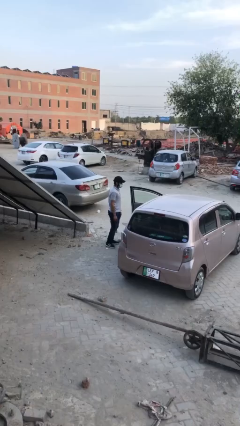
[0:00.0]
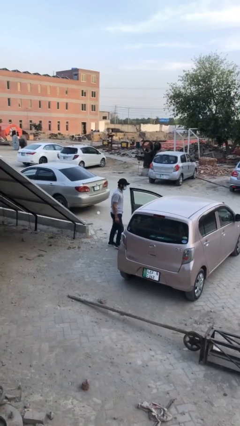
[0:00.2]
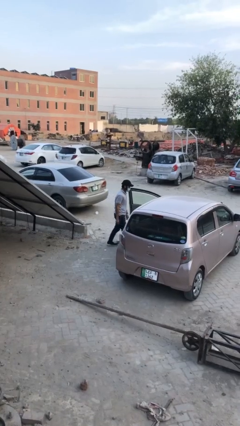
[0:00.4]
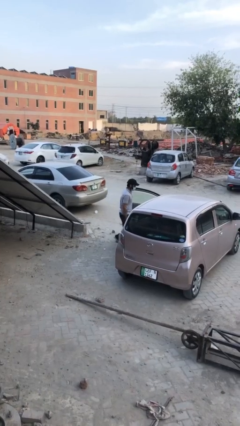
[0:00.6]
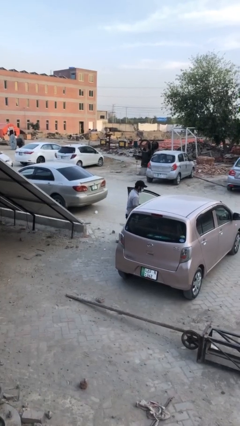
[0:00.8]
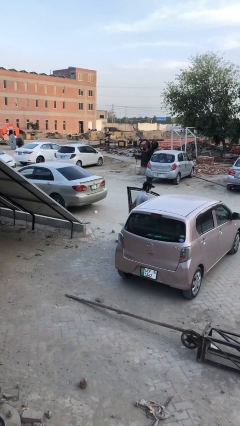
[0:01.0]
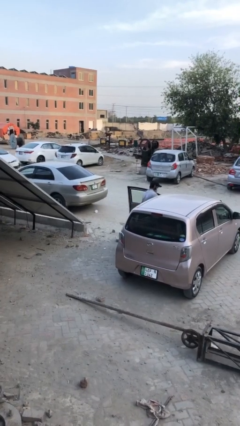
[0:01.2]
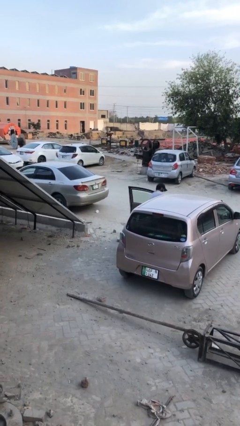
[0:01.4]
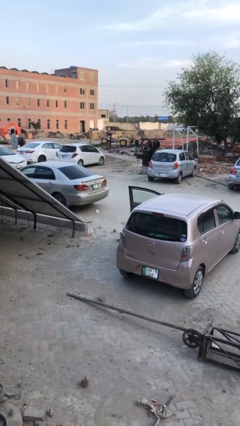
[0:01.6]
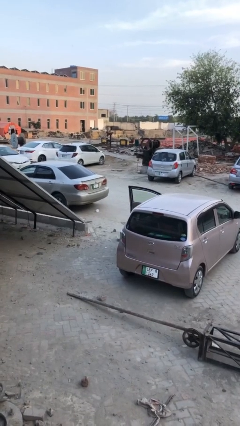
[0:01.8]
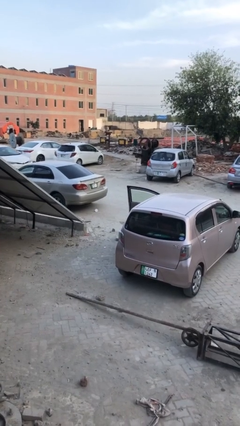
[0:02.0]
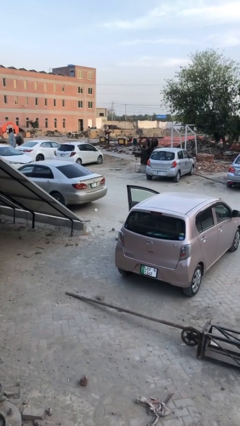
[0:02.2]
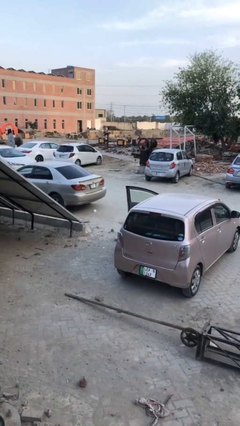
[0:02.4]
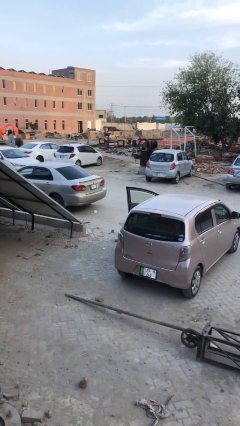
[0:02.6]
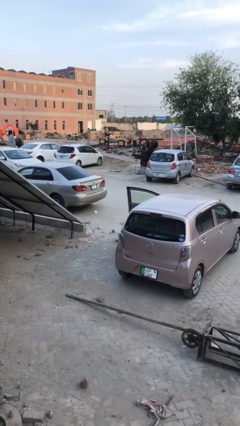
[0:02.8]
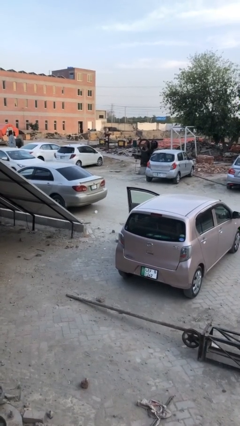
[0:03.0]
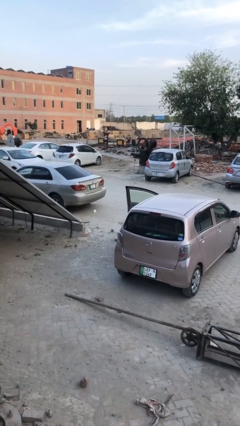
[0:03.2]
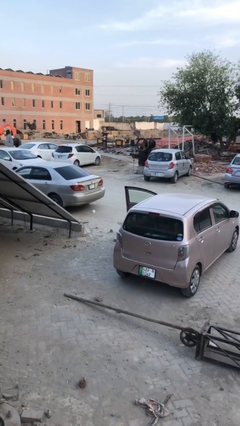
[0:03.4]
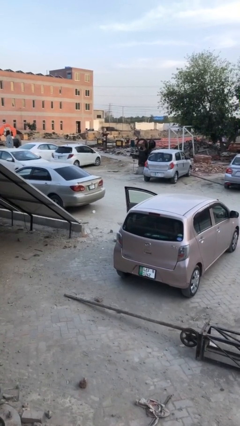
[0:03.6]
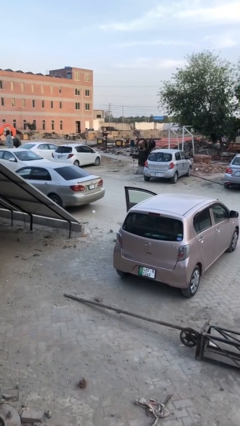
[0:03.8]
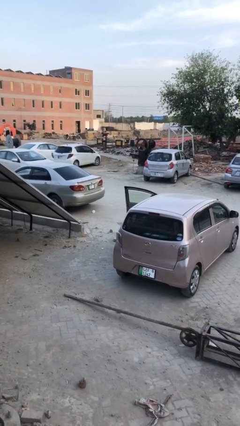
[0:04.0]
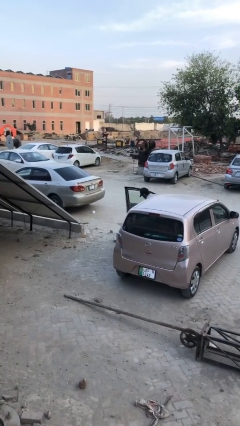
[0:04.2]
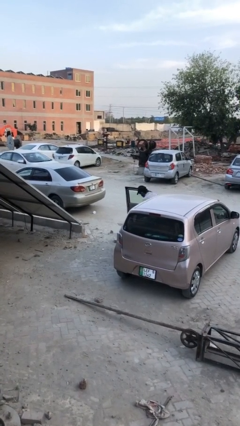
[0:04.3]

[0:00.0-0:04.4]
person enters car

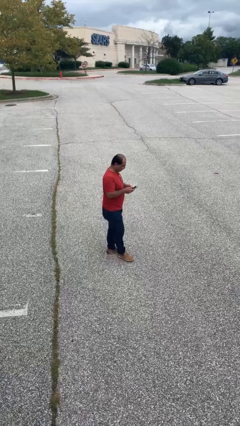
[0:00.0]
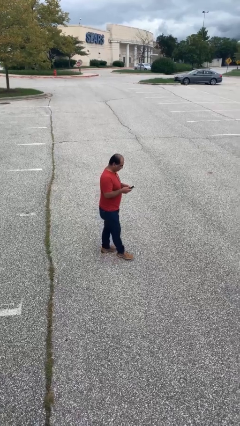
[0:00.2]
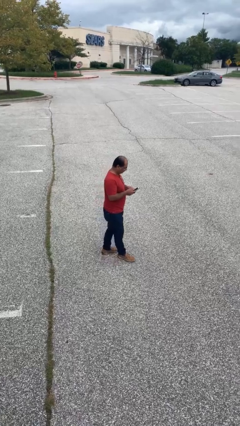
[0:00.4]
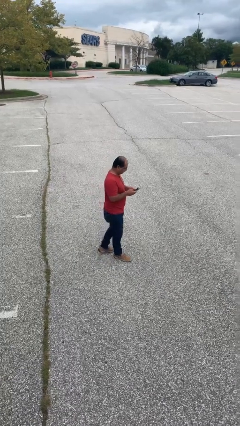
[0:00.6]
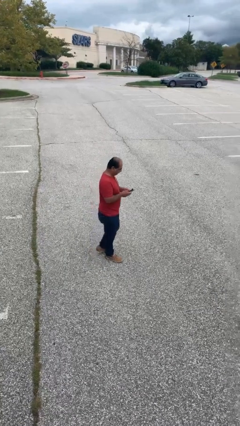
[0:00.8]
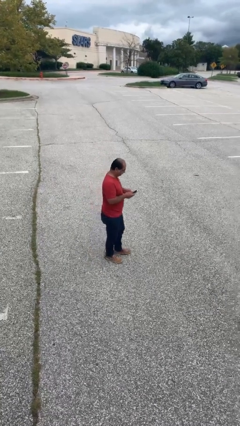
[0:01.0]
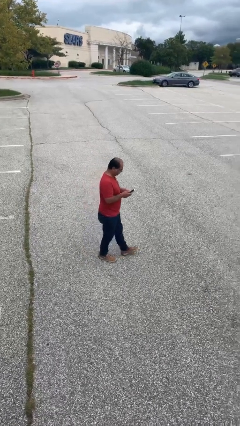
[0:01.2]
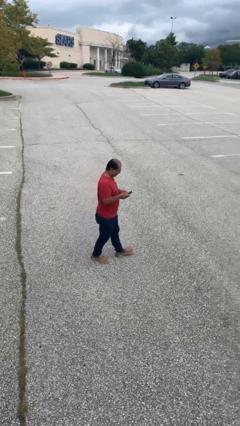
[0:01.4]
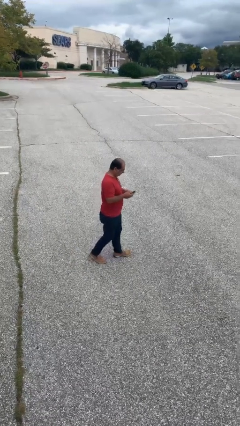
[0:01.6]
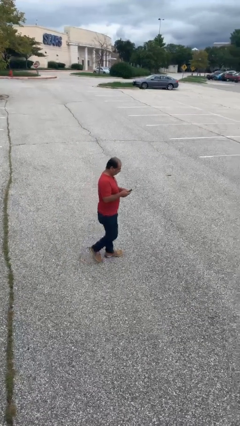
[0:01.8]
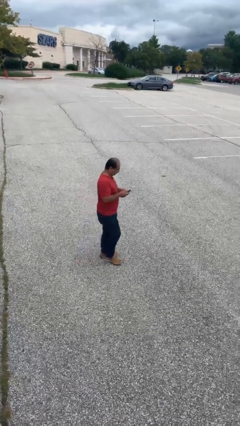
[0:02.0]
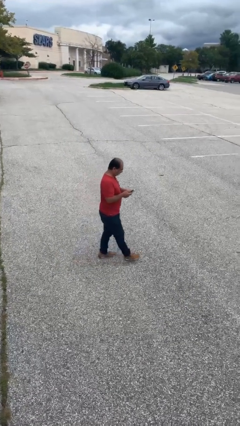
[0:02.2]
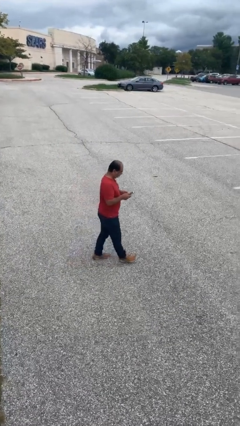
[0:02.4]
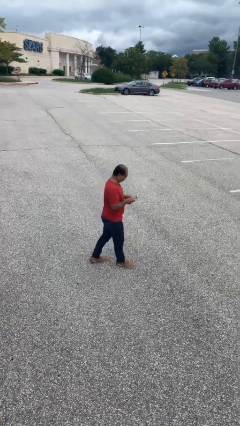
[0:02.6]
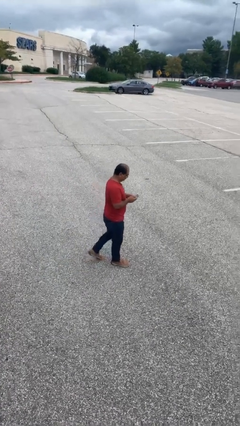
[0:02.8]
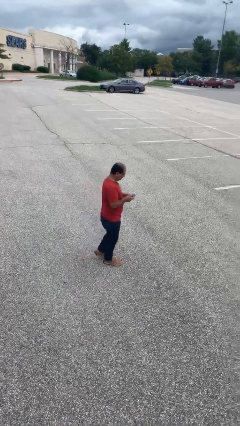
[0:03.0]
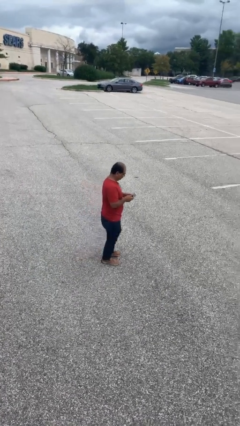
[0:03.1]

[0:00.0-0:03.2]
person texts on phone

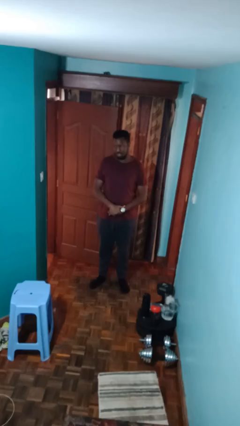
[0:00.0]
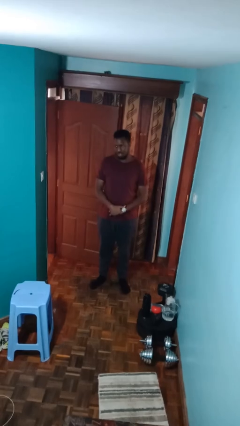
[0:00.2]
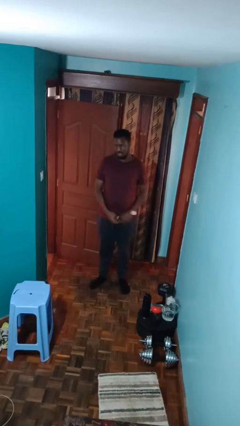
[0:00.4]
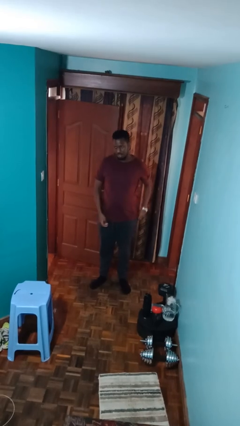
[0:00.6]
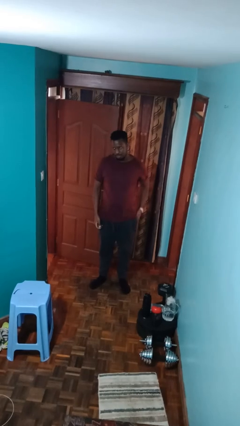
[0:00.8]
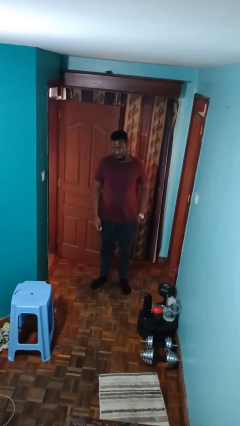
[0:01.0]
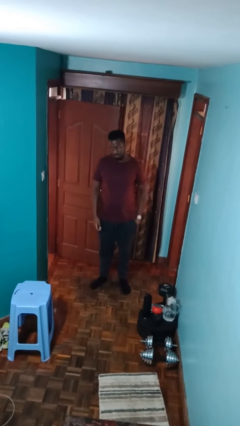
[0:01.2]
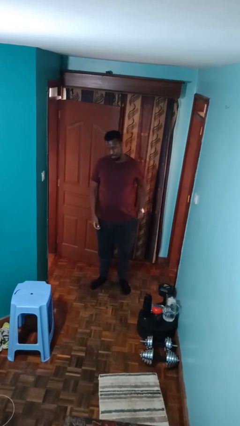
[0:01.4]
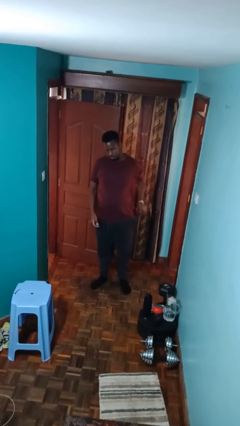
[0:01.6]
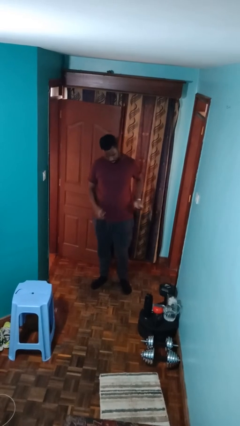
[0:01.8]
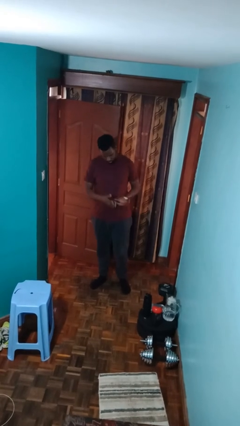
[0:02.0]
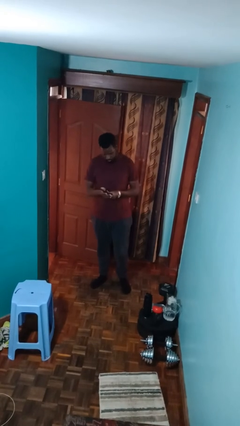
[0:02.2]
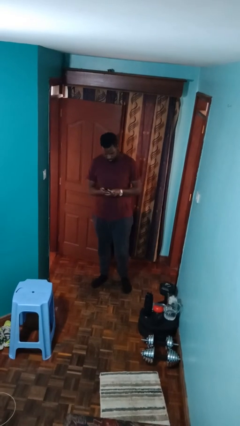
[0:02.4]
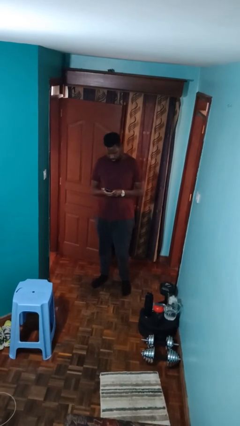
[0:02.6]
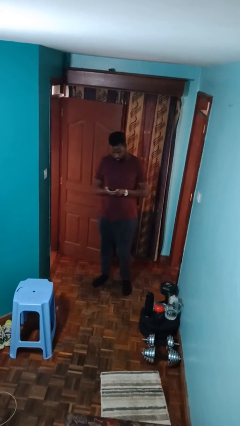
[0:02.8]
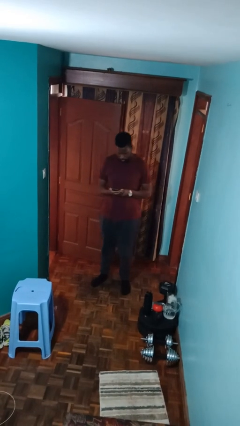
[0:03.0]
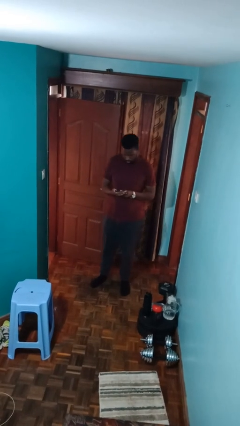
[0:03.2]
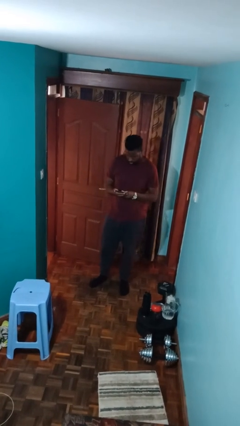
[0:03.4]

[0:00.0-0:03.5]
person takes phone from pocket

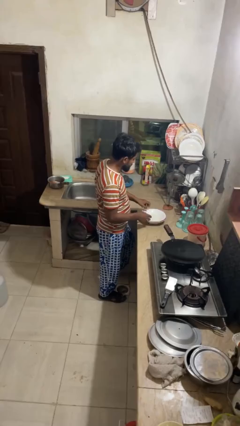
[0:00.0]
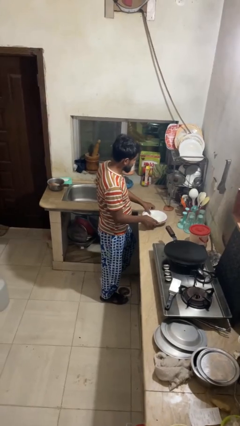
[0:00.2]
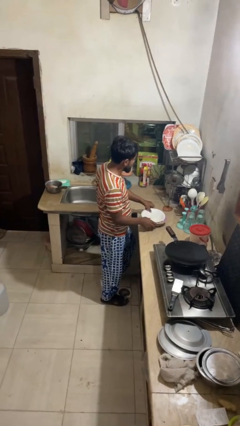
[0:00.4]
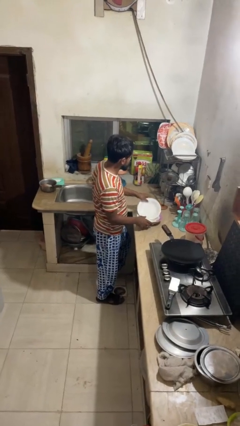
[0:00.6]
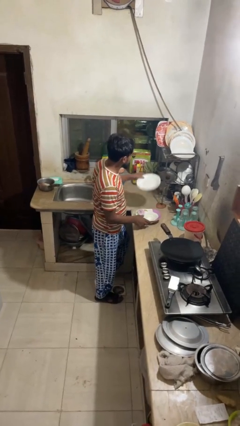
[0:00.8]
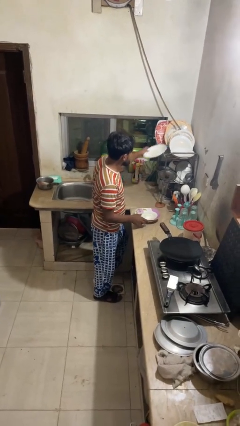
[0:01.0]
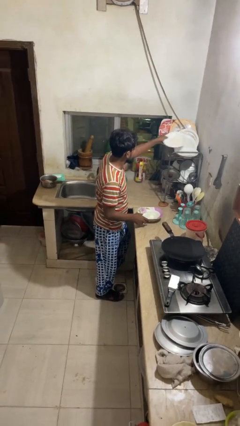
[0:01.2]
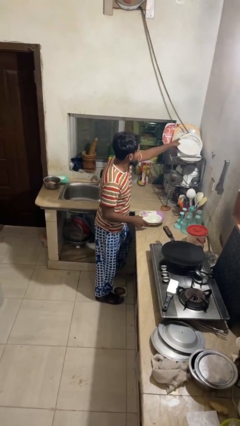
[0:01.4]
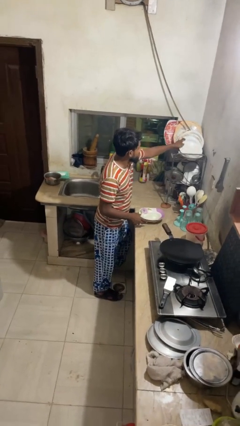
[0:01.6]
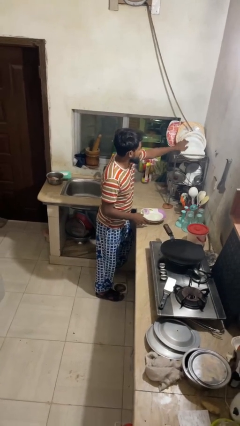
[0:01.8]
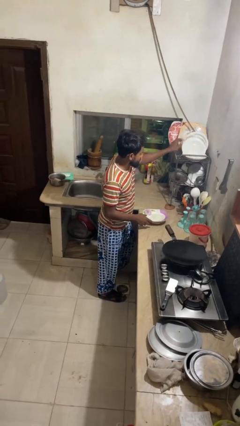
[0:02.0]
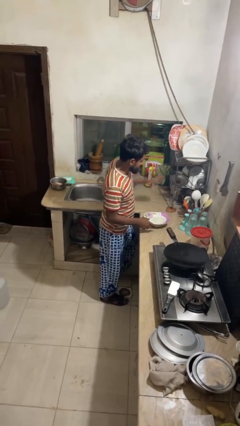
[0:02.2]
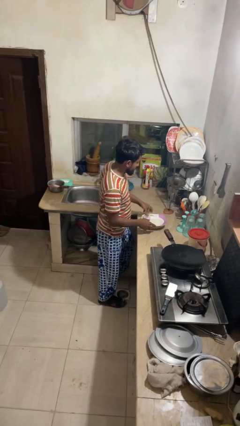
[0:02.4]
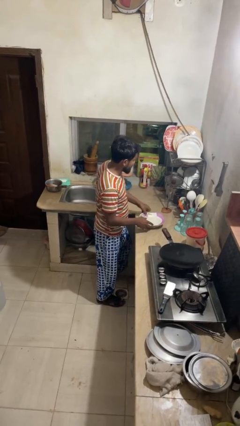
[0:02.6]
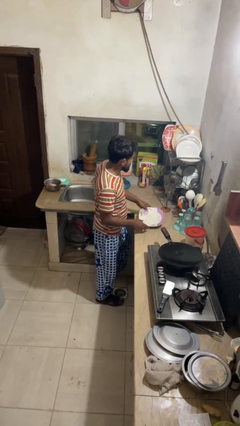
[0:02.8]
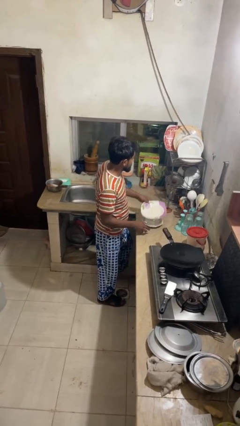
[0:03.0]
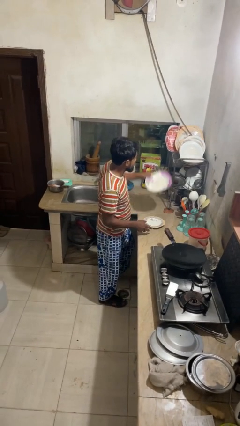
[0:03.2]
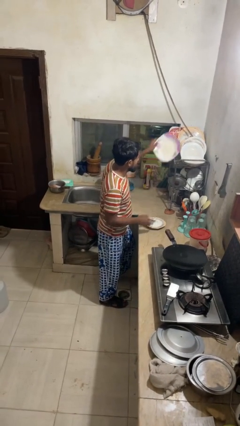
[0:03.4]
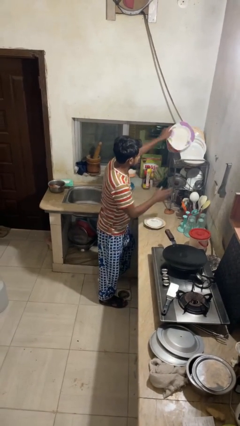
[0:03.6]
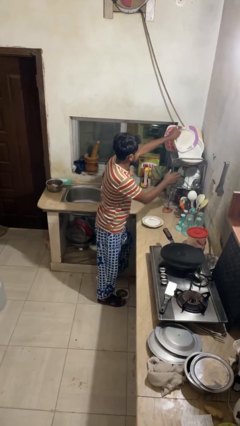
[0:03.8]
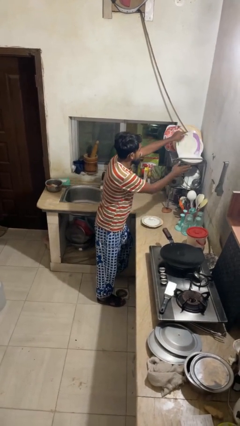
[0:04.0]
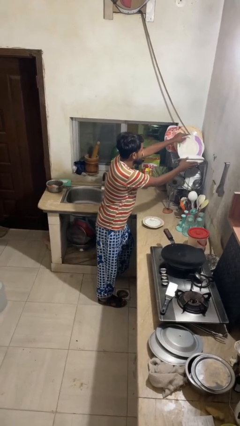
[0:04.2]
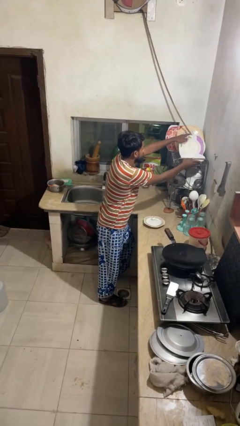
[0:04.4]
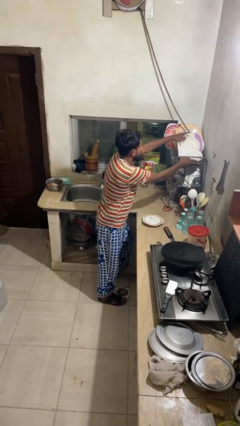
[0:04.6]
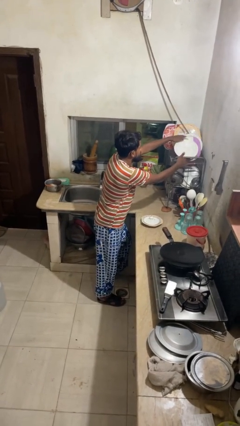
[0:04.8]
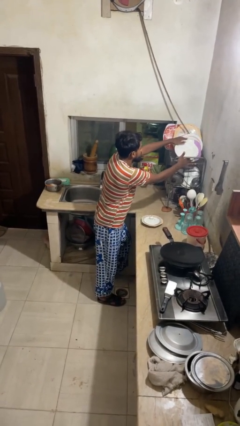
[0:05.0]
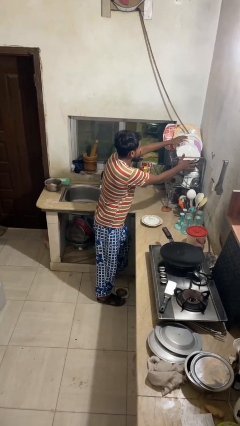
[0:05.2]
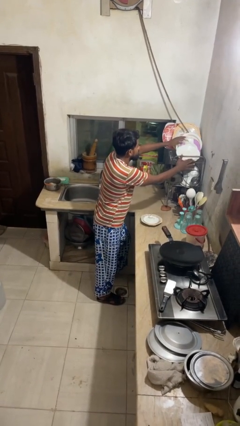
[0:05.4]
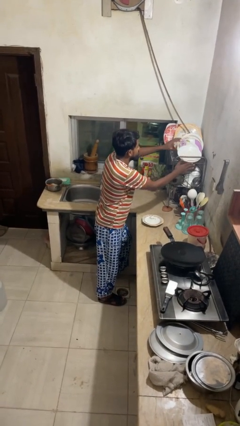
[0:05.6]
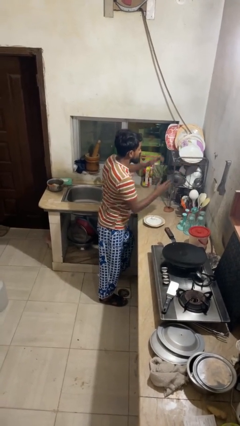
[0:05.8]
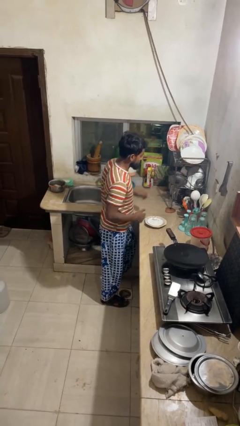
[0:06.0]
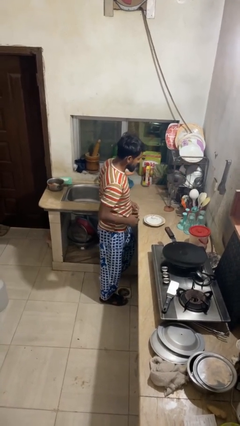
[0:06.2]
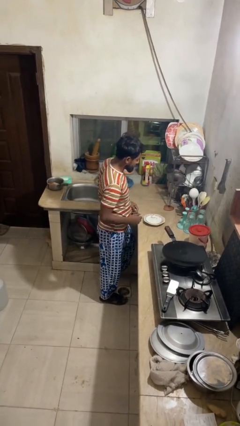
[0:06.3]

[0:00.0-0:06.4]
person loads dishwasher

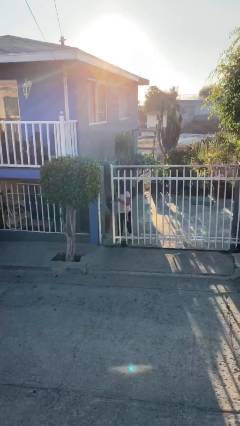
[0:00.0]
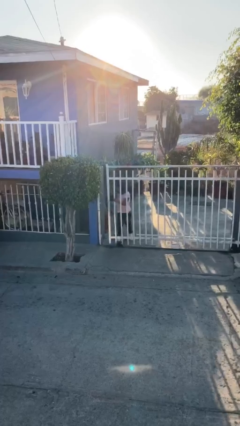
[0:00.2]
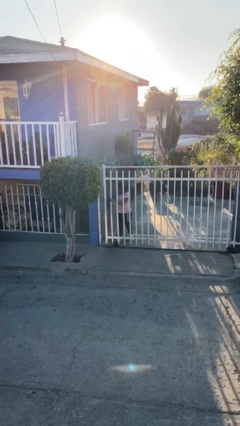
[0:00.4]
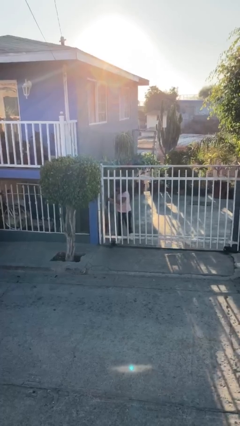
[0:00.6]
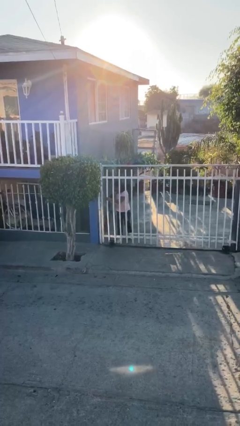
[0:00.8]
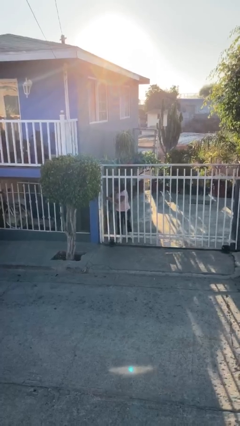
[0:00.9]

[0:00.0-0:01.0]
person closes facility door
